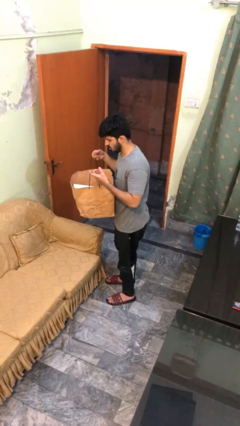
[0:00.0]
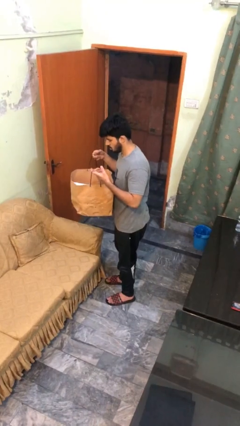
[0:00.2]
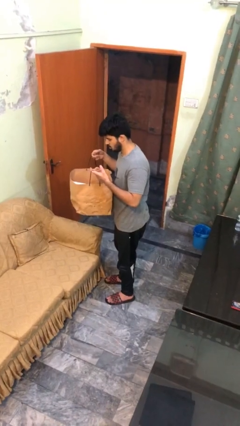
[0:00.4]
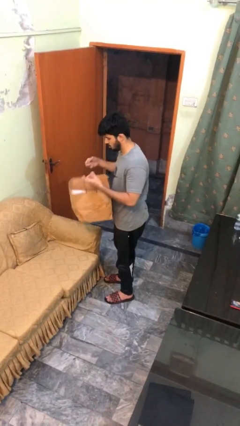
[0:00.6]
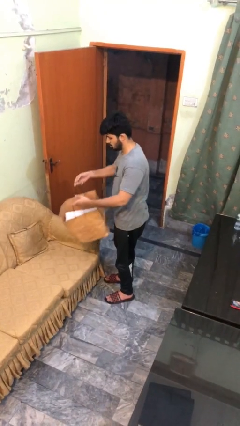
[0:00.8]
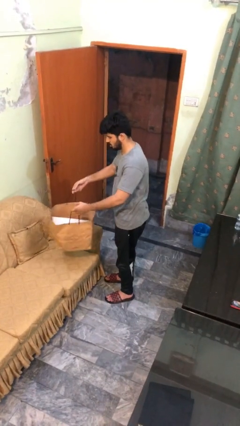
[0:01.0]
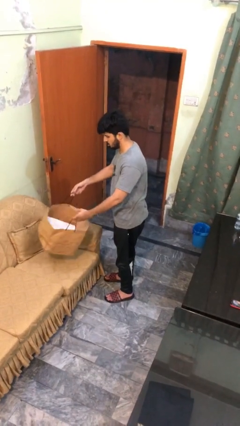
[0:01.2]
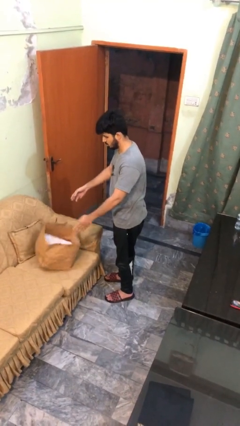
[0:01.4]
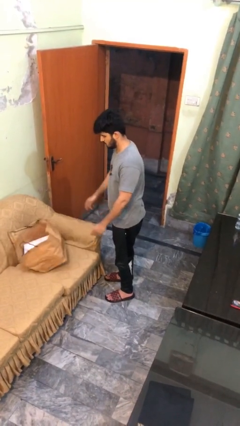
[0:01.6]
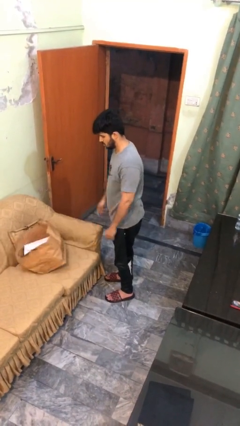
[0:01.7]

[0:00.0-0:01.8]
person puts down object on couch

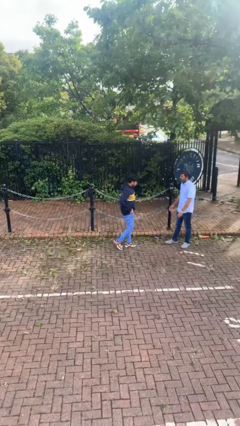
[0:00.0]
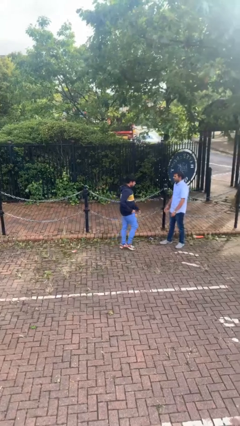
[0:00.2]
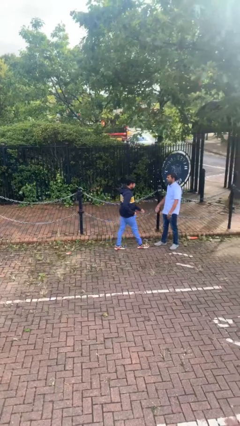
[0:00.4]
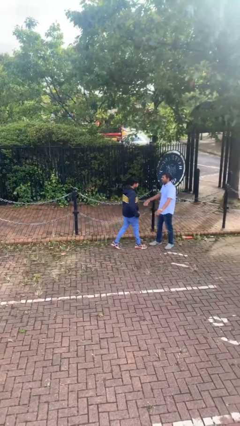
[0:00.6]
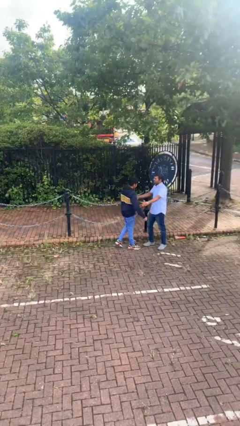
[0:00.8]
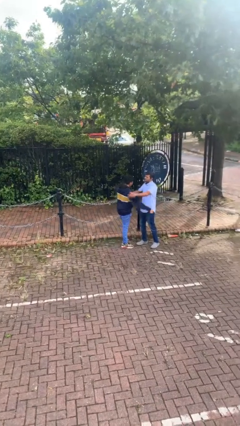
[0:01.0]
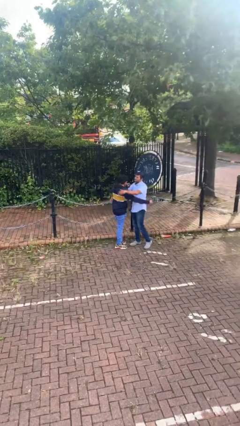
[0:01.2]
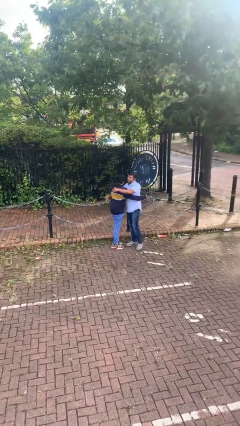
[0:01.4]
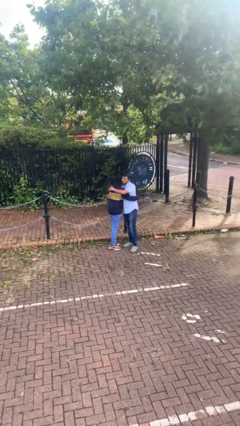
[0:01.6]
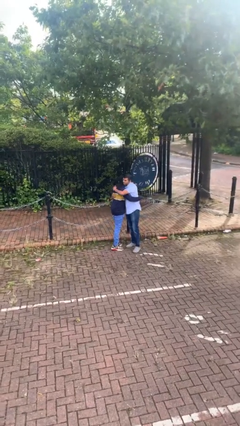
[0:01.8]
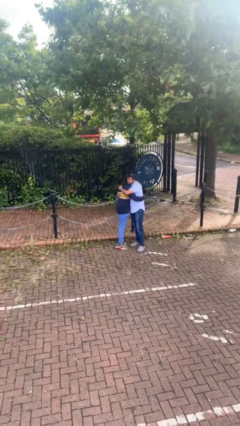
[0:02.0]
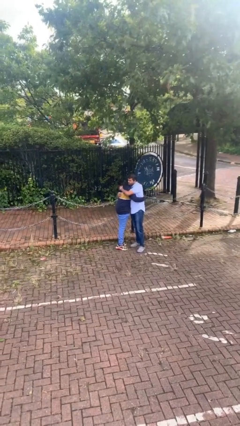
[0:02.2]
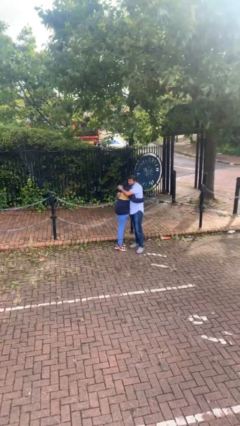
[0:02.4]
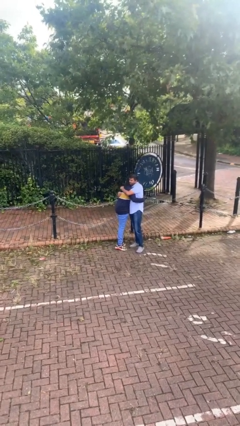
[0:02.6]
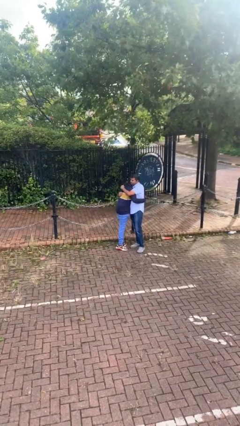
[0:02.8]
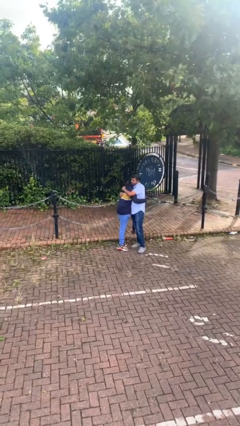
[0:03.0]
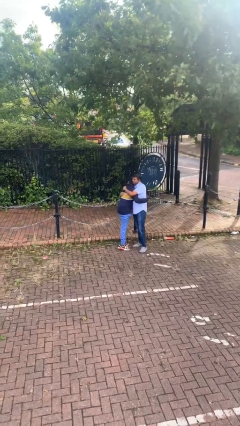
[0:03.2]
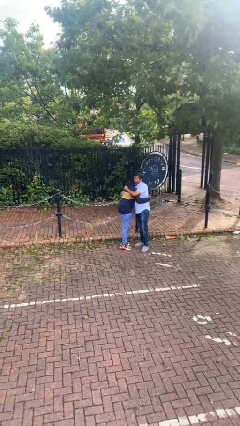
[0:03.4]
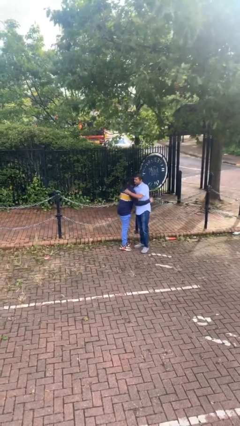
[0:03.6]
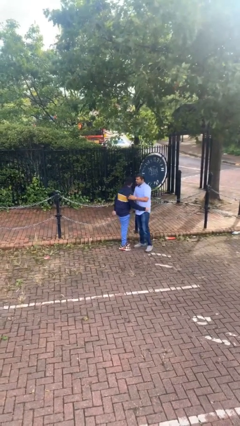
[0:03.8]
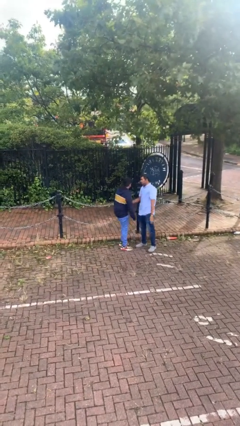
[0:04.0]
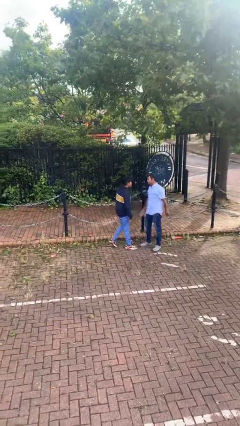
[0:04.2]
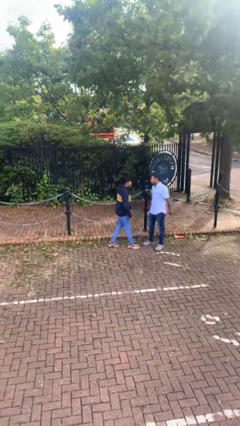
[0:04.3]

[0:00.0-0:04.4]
person embraces person

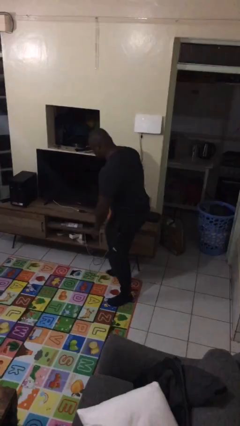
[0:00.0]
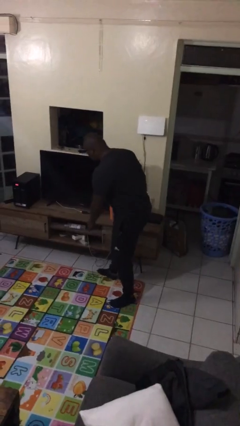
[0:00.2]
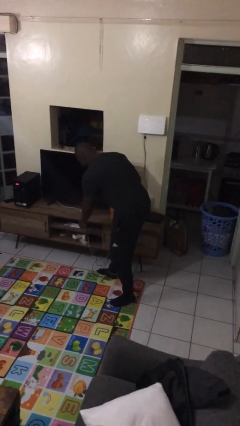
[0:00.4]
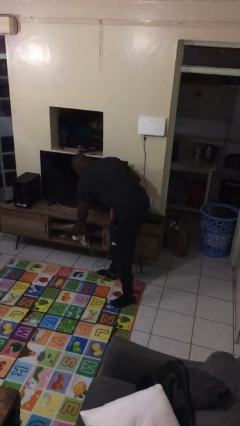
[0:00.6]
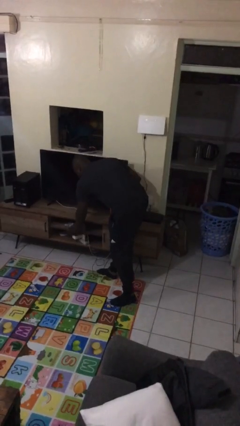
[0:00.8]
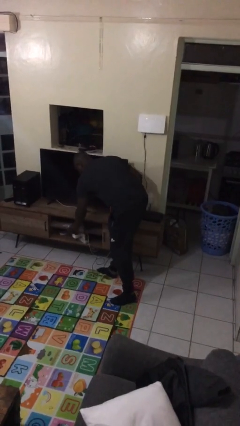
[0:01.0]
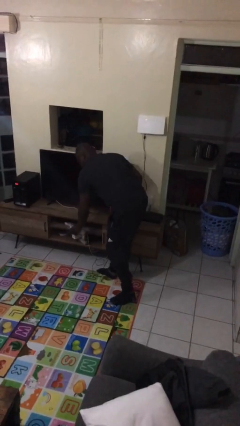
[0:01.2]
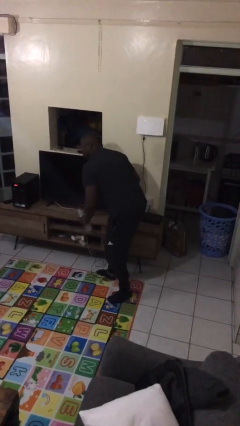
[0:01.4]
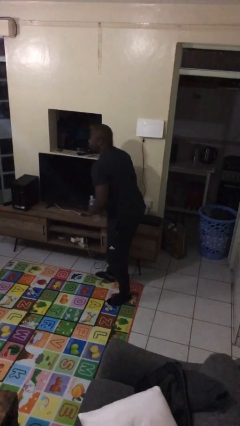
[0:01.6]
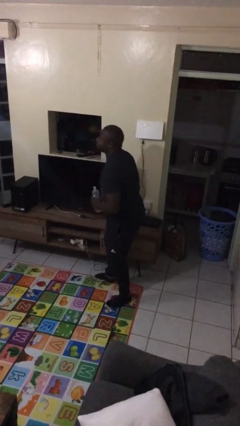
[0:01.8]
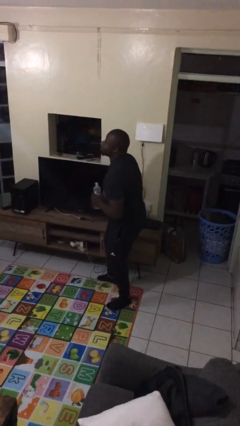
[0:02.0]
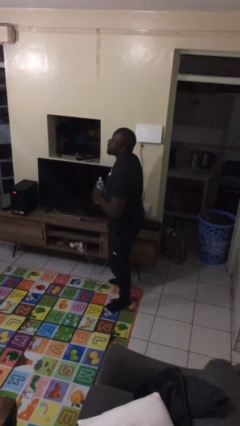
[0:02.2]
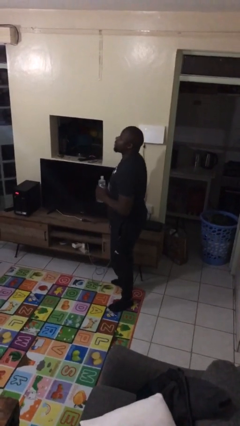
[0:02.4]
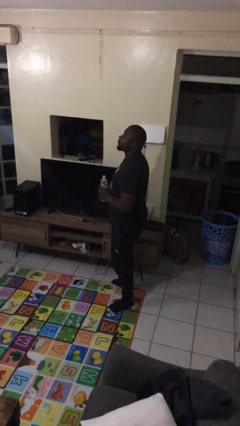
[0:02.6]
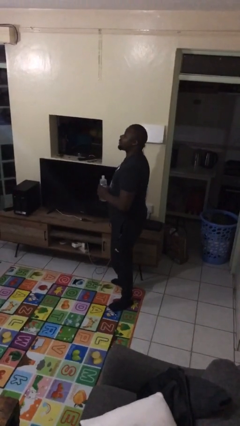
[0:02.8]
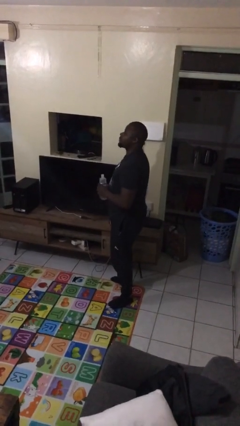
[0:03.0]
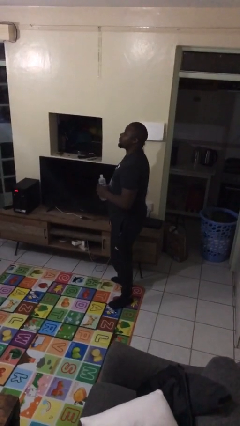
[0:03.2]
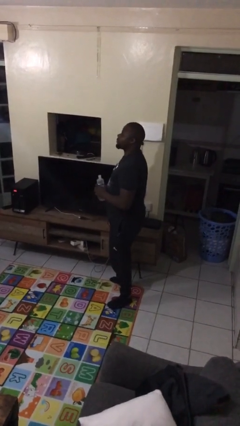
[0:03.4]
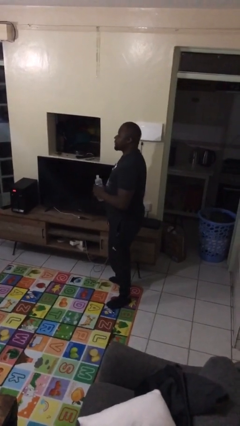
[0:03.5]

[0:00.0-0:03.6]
person picks up object from cabinet

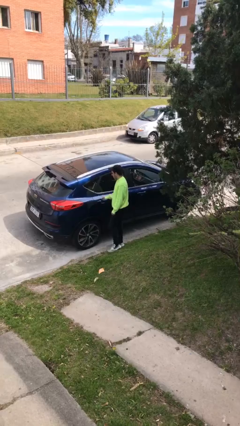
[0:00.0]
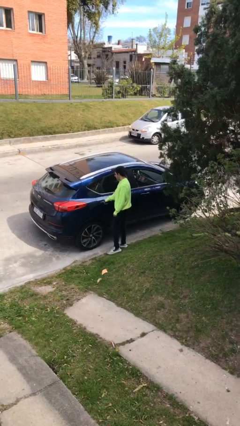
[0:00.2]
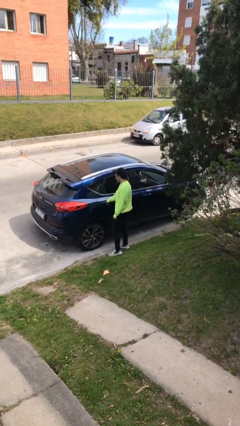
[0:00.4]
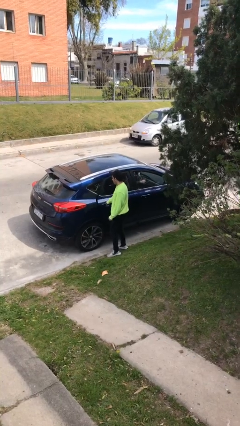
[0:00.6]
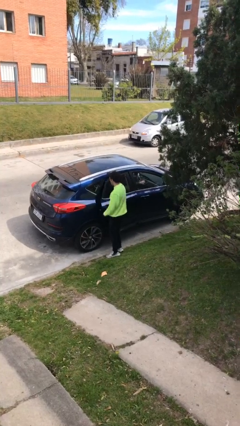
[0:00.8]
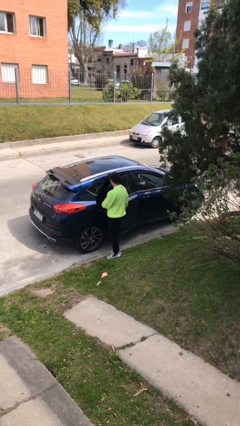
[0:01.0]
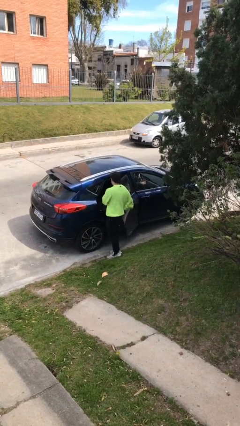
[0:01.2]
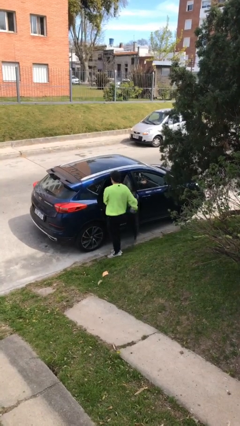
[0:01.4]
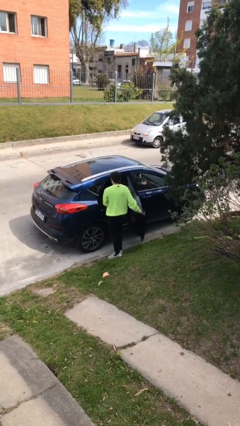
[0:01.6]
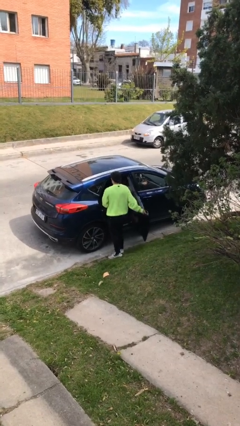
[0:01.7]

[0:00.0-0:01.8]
person opens car door

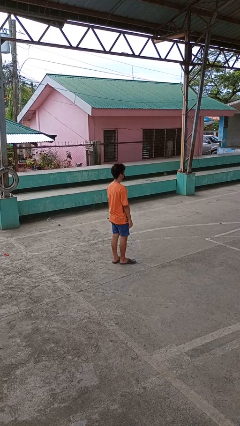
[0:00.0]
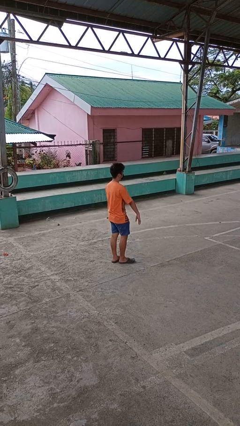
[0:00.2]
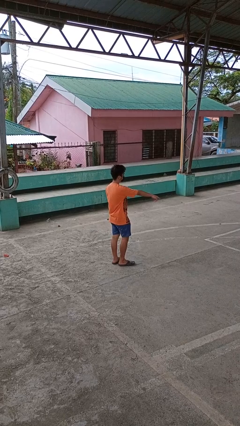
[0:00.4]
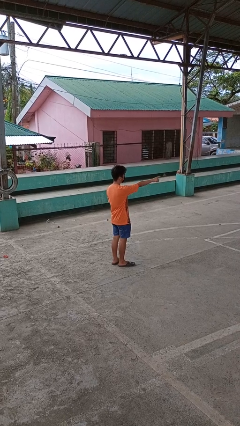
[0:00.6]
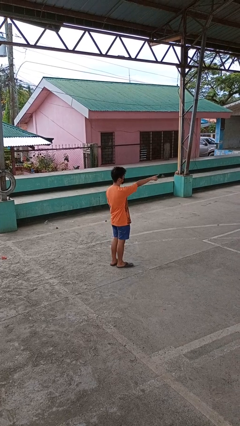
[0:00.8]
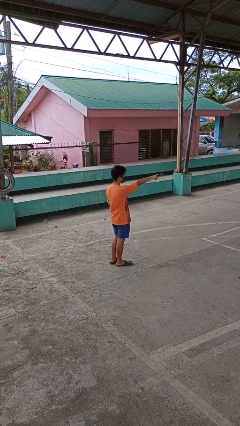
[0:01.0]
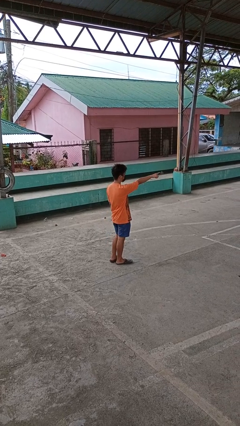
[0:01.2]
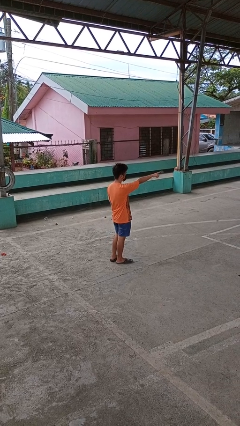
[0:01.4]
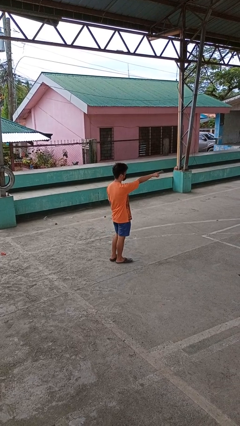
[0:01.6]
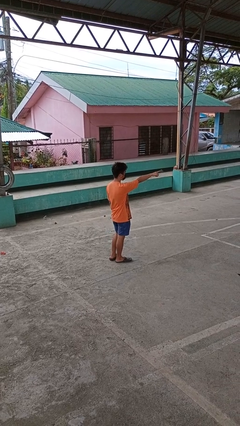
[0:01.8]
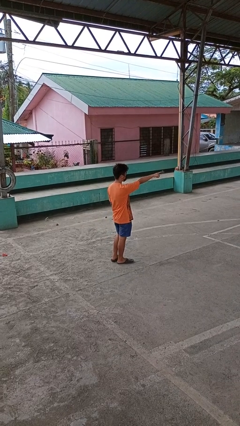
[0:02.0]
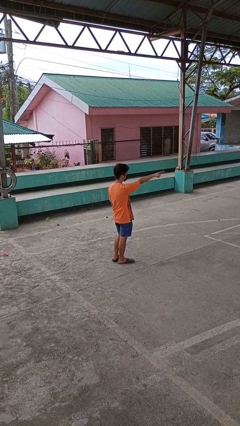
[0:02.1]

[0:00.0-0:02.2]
person points at person

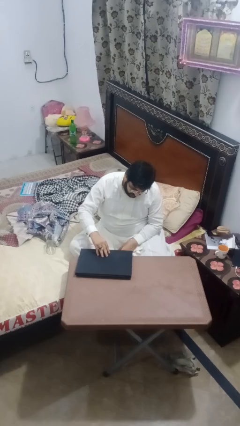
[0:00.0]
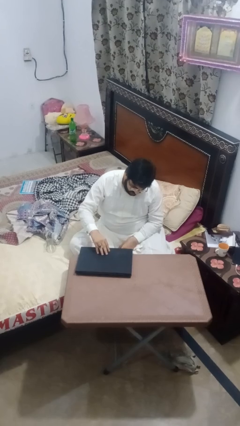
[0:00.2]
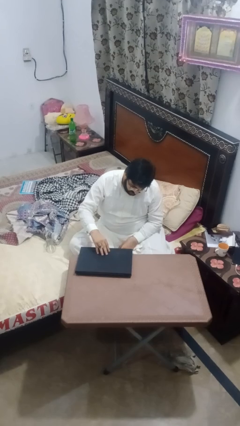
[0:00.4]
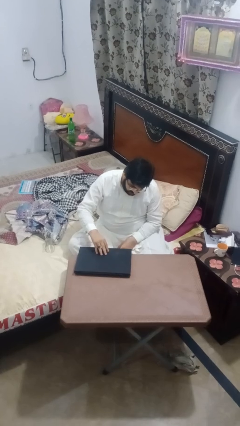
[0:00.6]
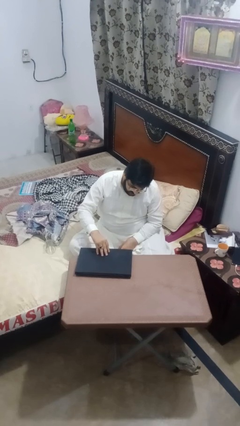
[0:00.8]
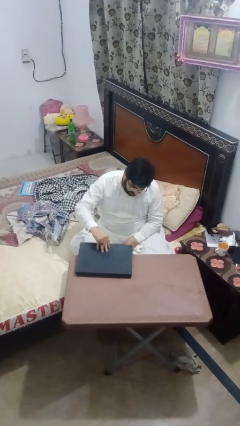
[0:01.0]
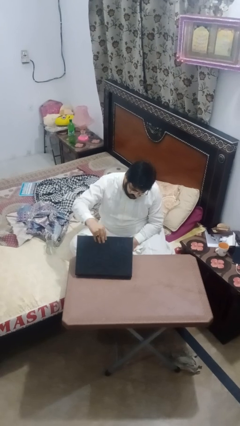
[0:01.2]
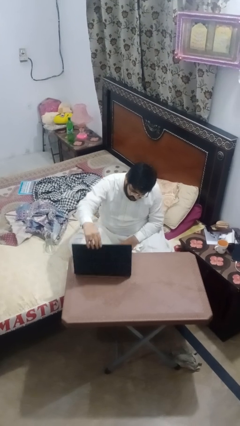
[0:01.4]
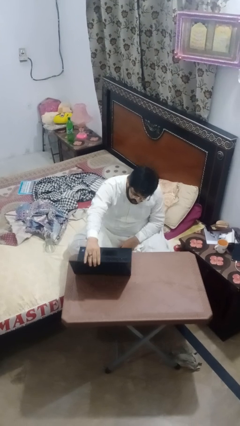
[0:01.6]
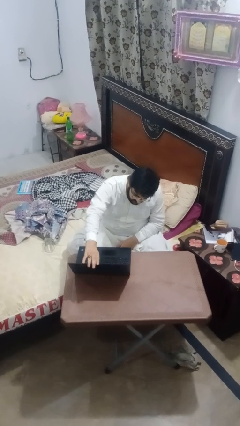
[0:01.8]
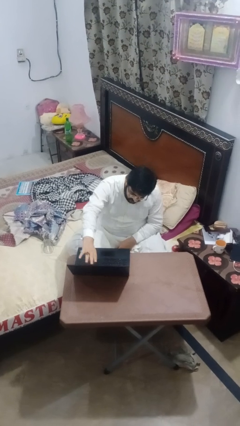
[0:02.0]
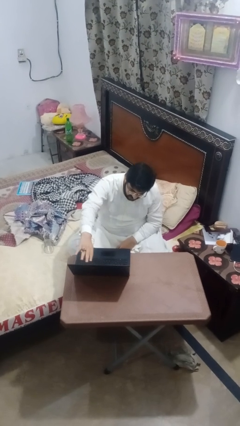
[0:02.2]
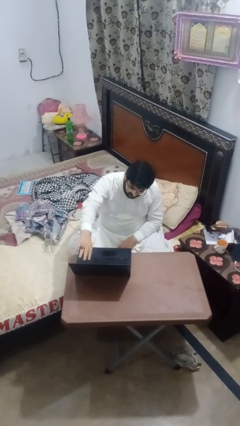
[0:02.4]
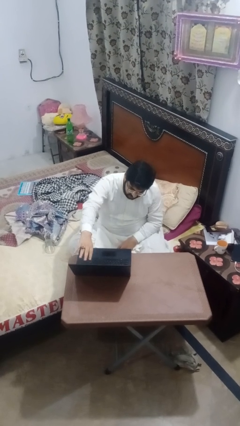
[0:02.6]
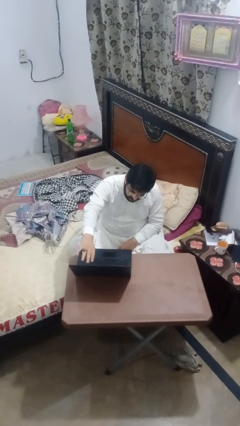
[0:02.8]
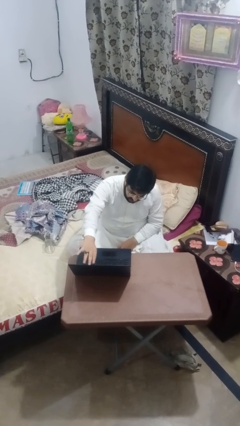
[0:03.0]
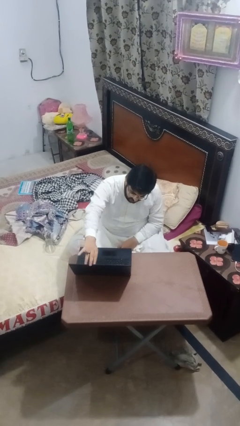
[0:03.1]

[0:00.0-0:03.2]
person opens laptop

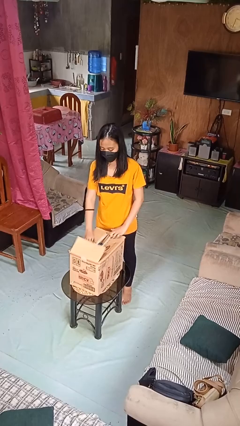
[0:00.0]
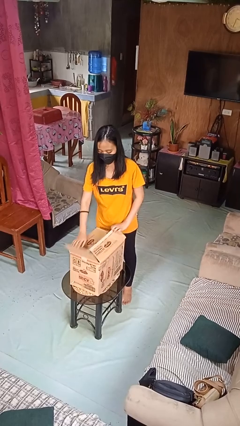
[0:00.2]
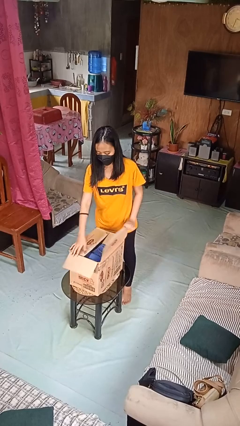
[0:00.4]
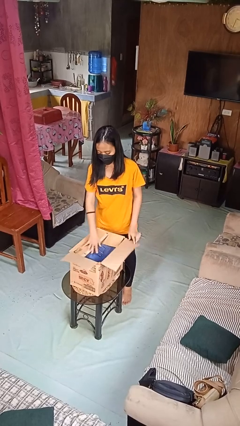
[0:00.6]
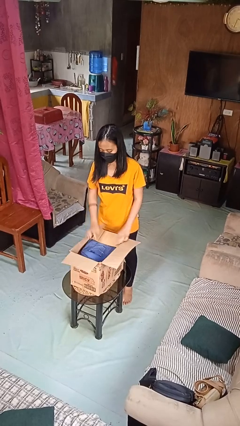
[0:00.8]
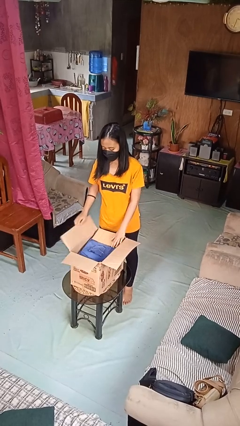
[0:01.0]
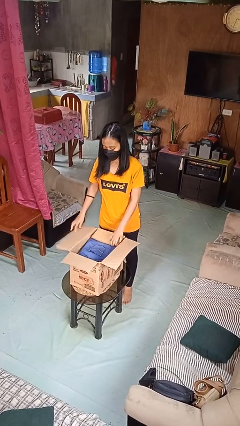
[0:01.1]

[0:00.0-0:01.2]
person opens box
